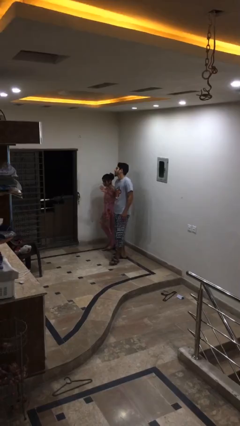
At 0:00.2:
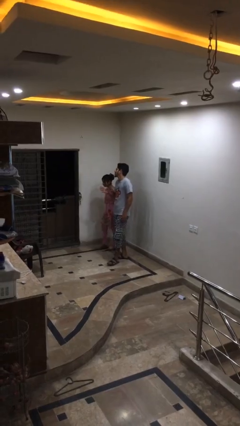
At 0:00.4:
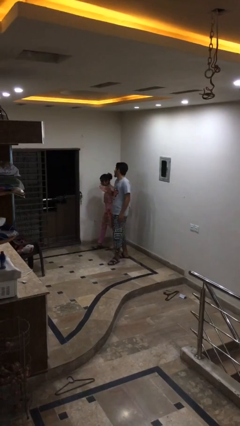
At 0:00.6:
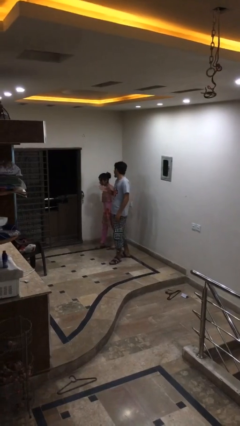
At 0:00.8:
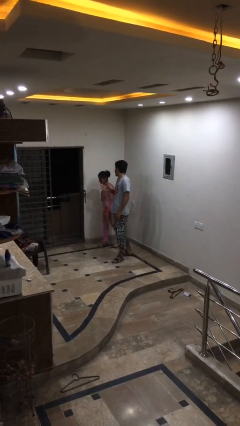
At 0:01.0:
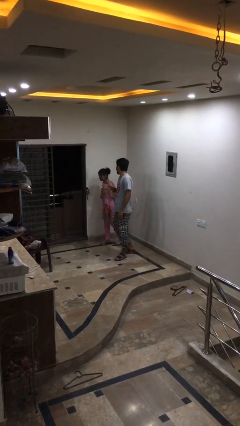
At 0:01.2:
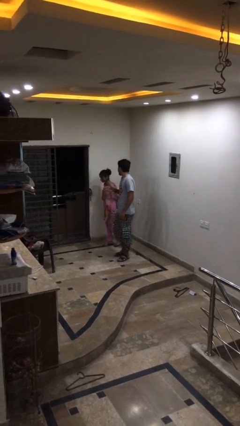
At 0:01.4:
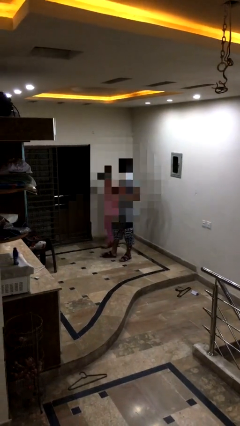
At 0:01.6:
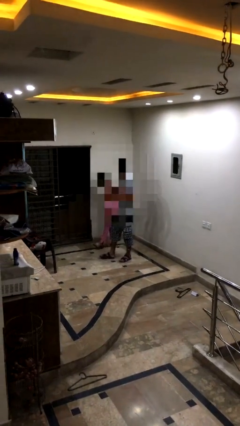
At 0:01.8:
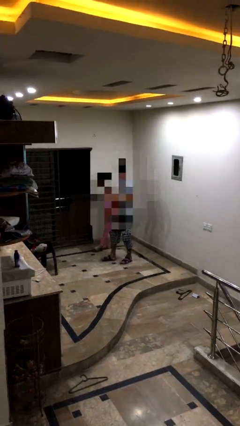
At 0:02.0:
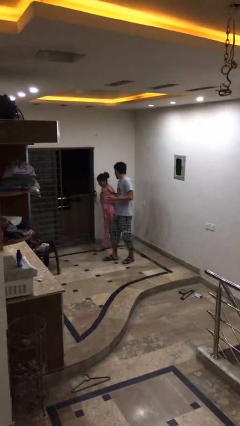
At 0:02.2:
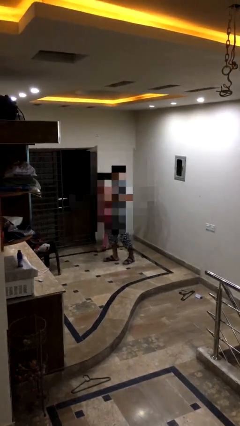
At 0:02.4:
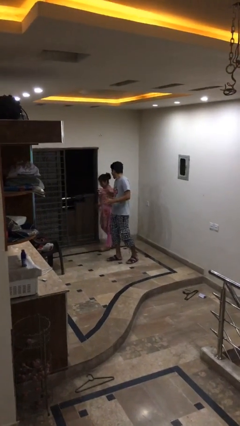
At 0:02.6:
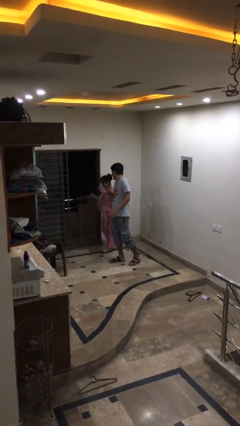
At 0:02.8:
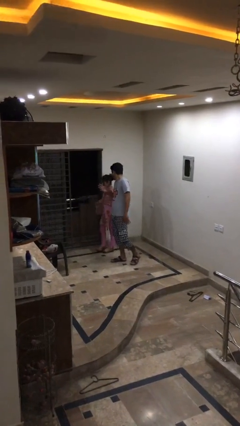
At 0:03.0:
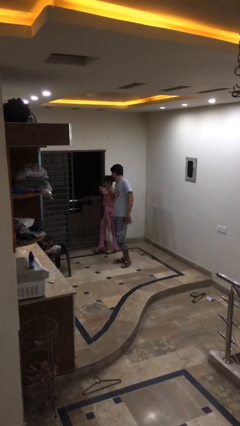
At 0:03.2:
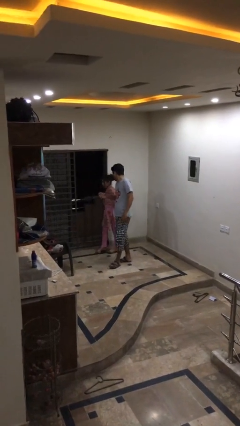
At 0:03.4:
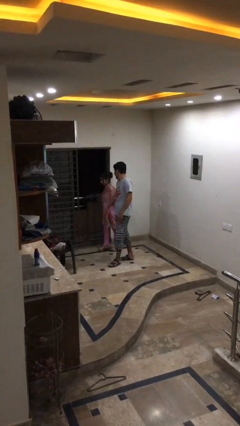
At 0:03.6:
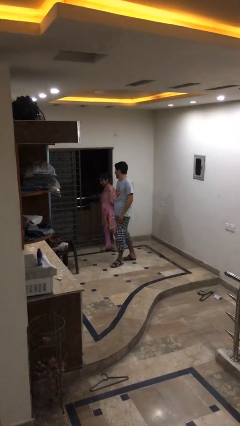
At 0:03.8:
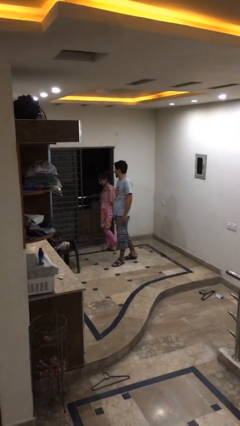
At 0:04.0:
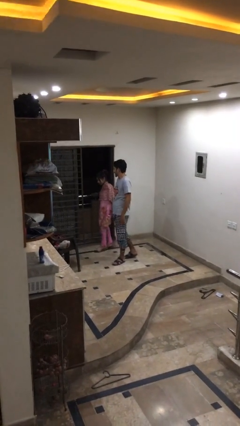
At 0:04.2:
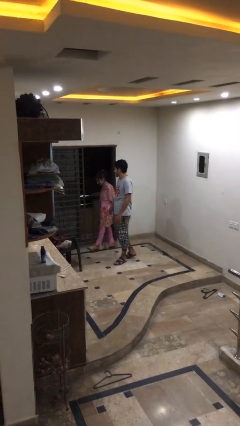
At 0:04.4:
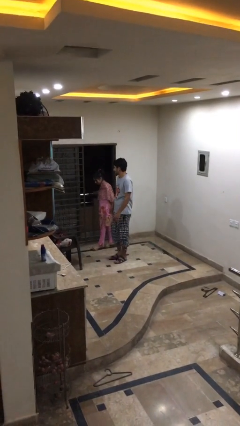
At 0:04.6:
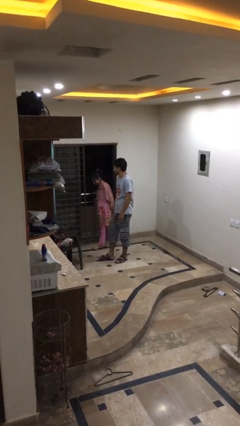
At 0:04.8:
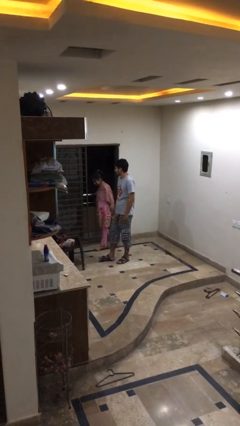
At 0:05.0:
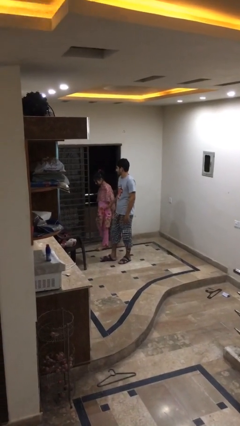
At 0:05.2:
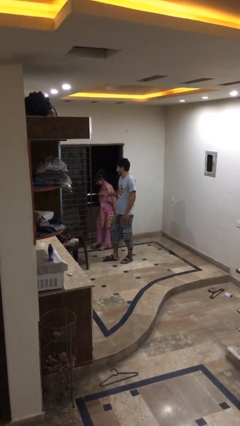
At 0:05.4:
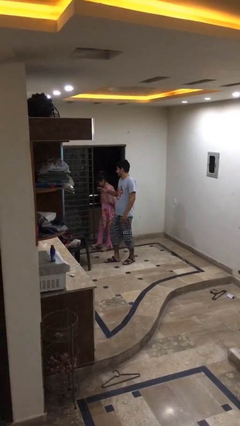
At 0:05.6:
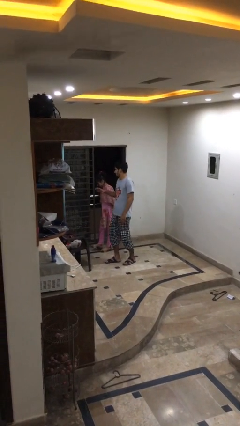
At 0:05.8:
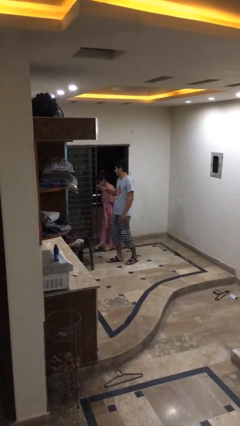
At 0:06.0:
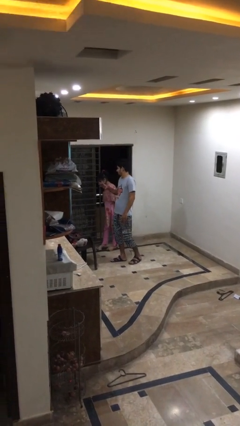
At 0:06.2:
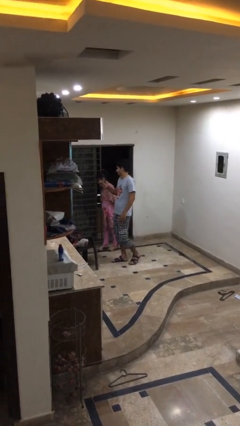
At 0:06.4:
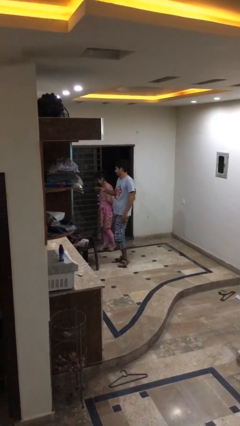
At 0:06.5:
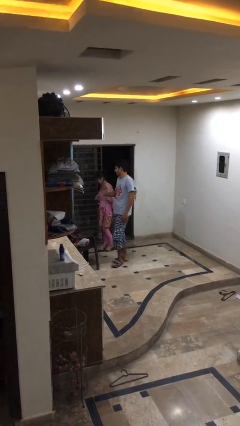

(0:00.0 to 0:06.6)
person talks to person

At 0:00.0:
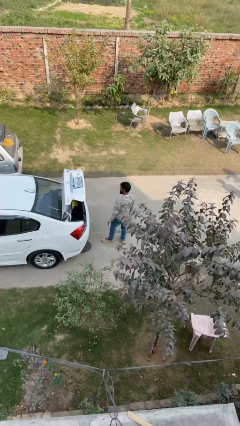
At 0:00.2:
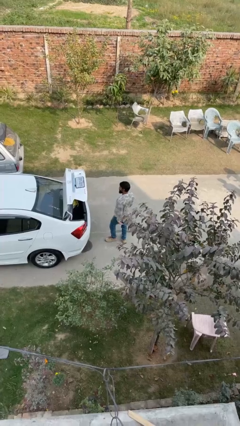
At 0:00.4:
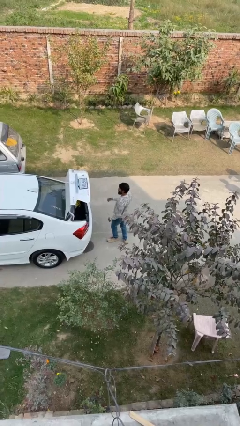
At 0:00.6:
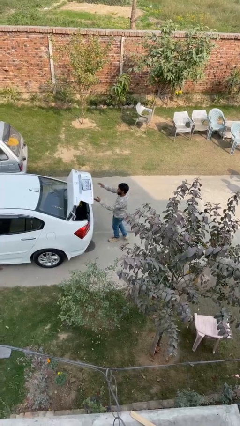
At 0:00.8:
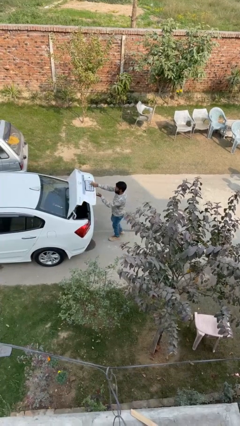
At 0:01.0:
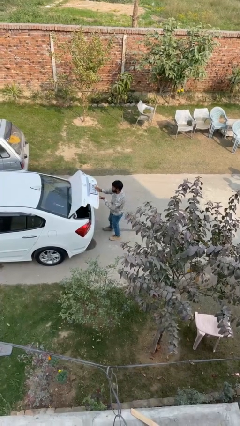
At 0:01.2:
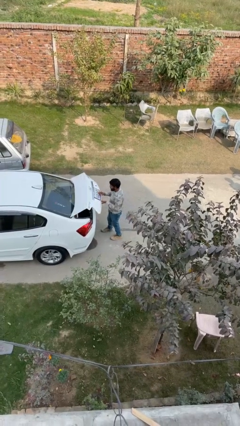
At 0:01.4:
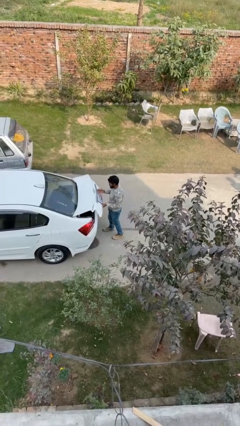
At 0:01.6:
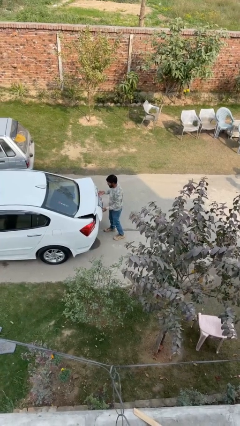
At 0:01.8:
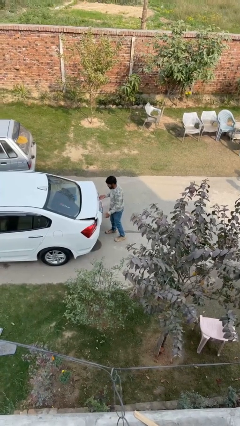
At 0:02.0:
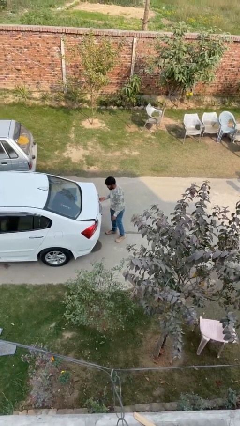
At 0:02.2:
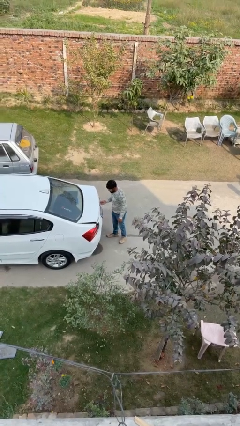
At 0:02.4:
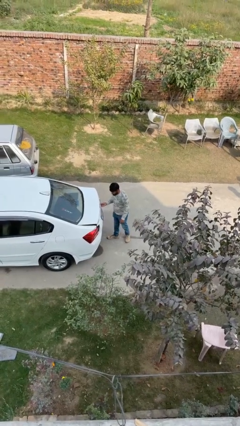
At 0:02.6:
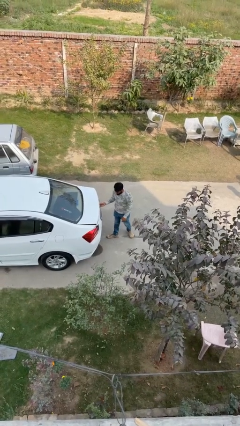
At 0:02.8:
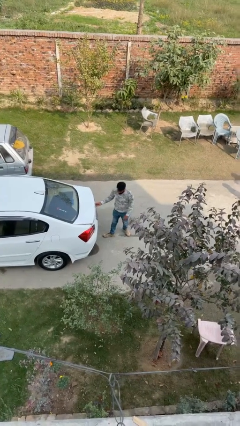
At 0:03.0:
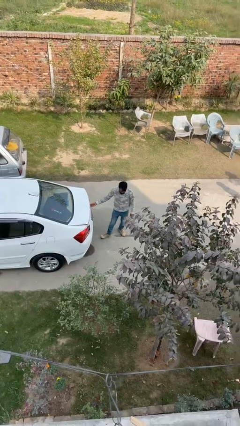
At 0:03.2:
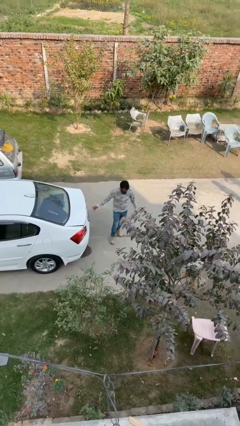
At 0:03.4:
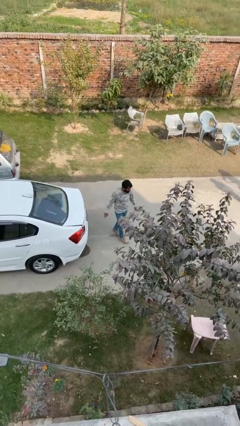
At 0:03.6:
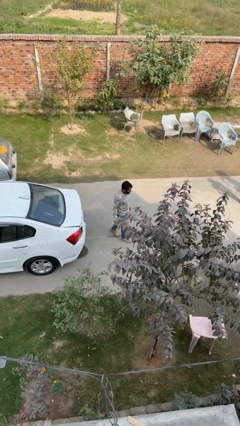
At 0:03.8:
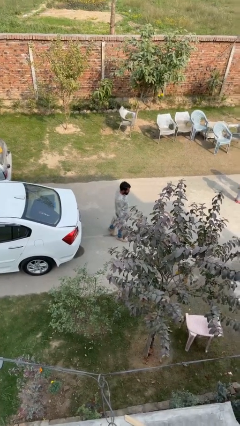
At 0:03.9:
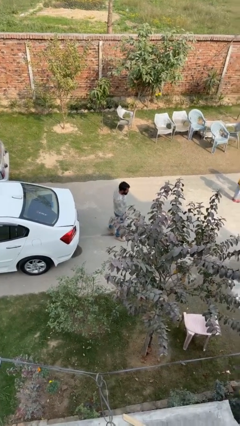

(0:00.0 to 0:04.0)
person closes car trunk

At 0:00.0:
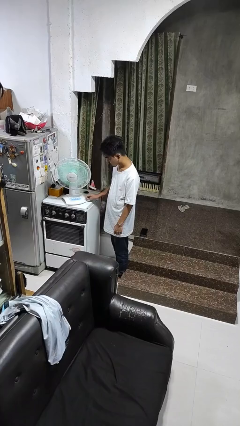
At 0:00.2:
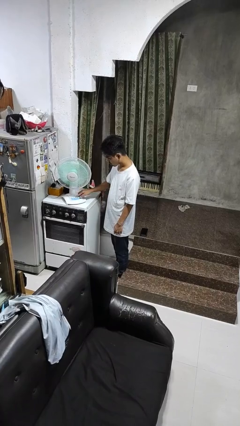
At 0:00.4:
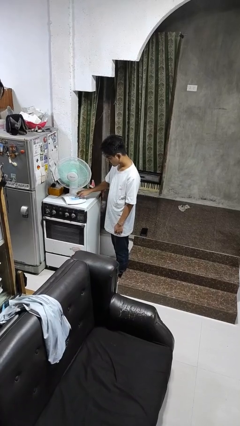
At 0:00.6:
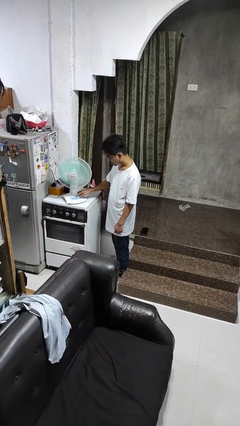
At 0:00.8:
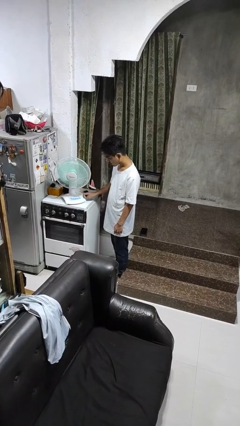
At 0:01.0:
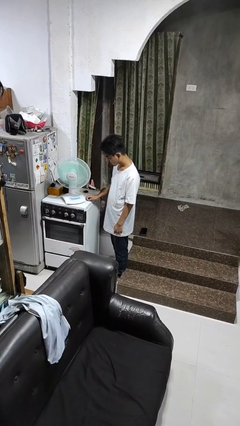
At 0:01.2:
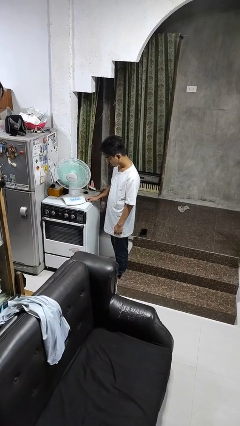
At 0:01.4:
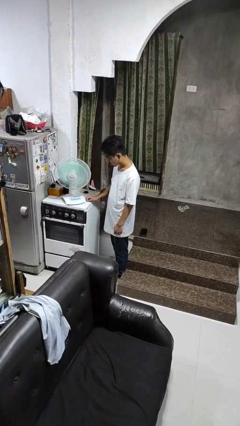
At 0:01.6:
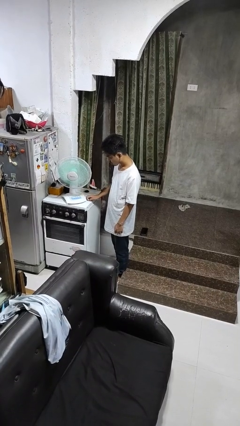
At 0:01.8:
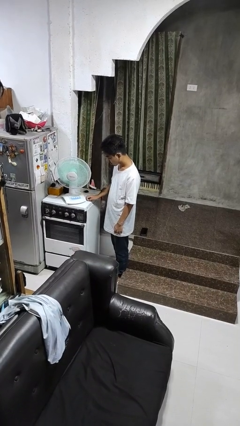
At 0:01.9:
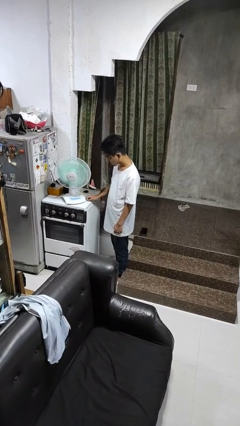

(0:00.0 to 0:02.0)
person turns on fan

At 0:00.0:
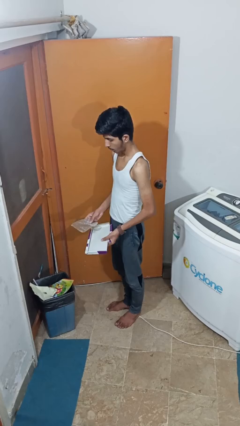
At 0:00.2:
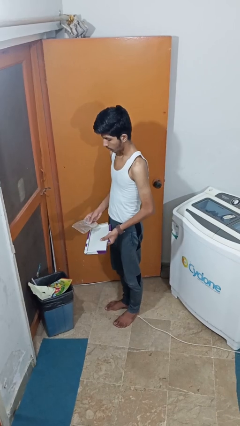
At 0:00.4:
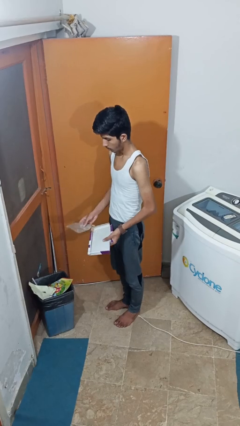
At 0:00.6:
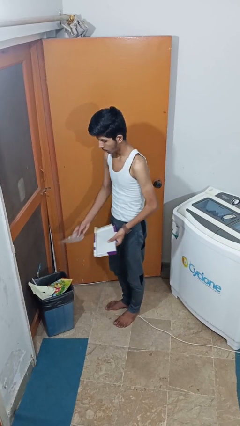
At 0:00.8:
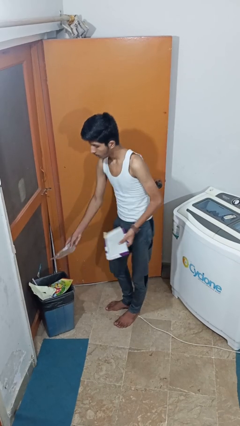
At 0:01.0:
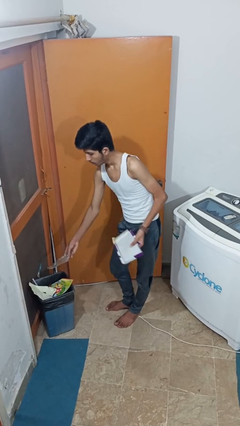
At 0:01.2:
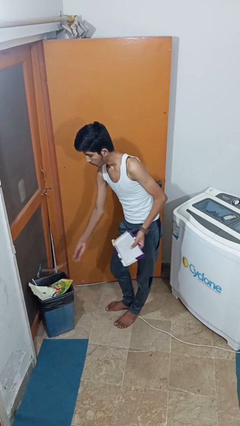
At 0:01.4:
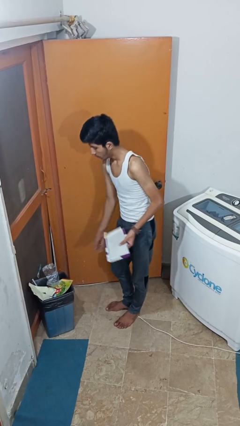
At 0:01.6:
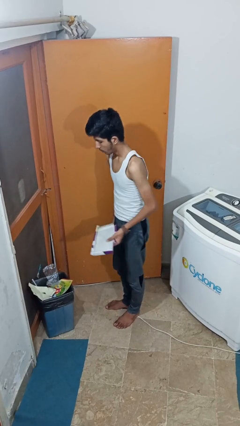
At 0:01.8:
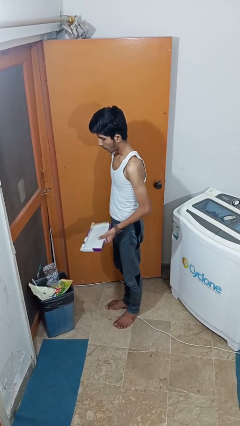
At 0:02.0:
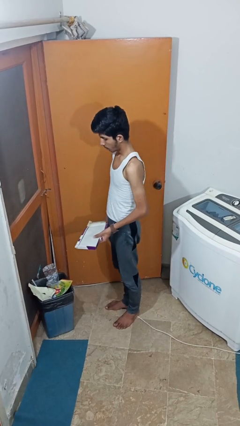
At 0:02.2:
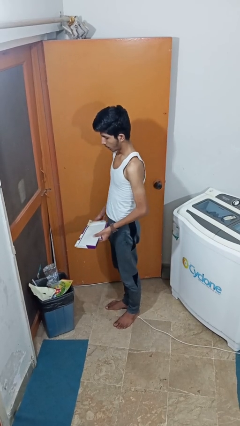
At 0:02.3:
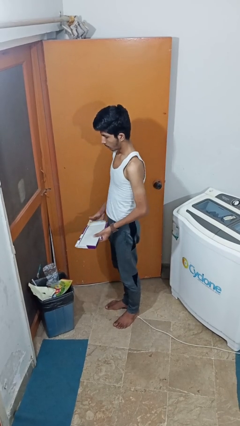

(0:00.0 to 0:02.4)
person discards trash

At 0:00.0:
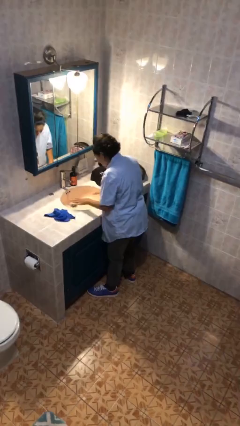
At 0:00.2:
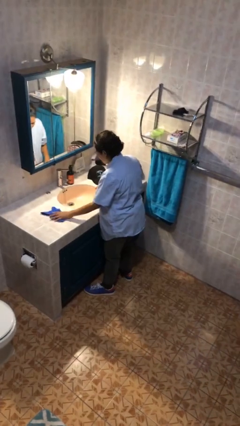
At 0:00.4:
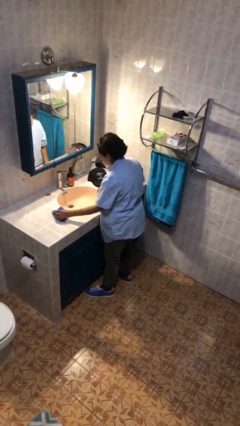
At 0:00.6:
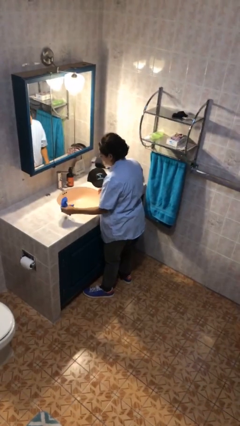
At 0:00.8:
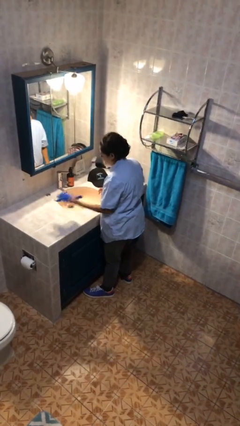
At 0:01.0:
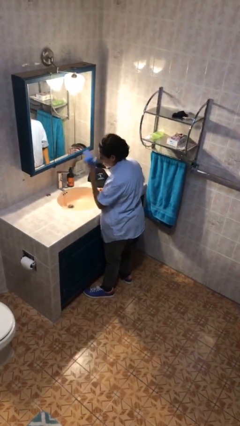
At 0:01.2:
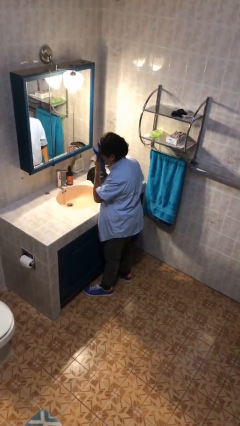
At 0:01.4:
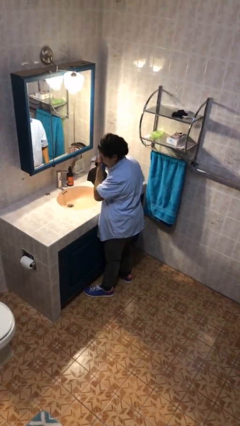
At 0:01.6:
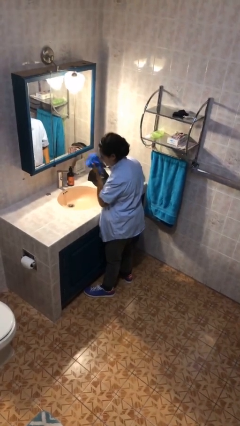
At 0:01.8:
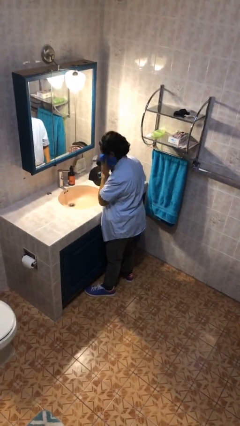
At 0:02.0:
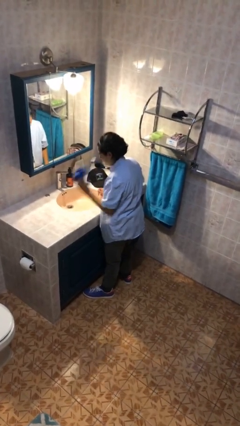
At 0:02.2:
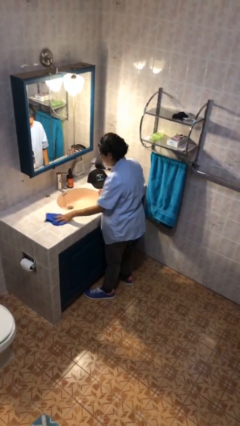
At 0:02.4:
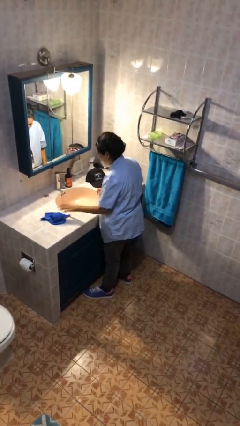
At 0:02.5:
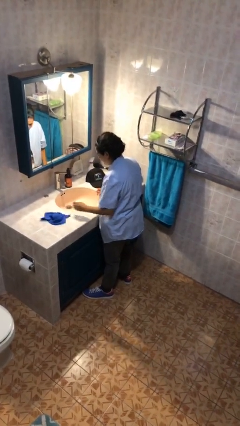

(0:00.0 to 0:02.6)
person dries face with towel
